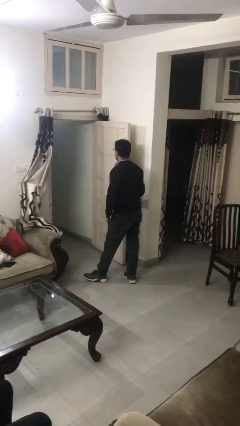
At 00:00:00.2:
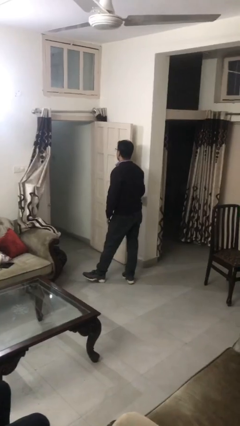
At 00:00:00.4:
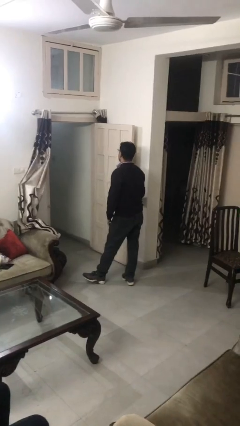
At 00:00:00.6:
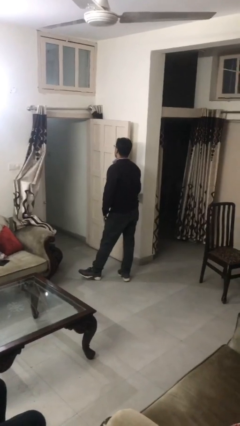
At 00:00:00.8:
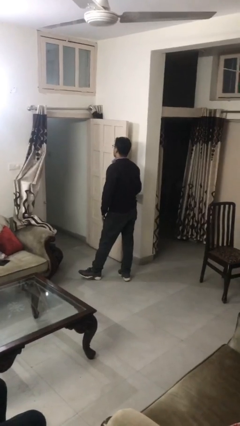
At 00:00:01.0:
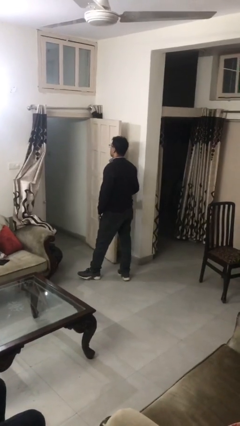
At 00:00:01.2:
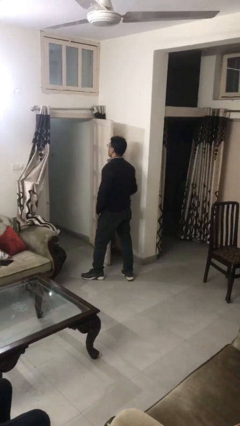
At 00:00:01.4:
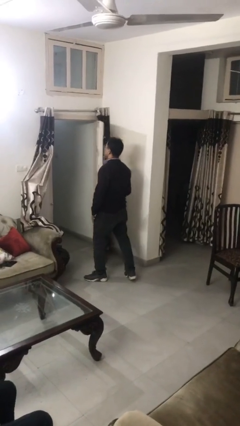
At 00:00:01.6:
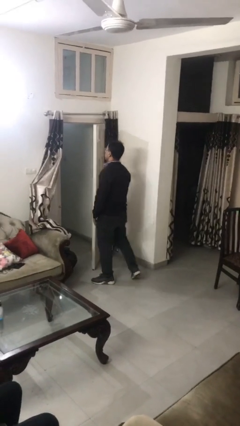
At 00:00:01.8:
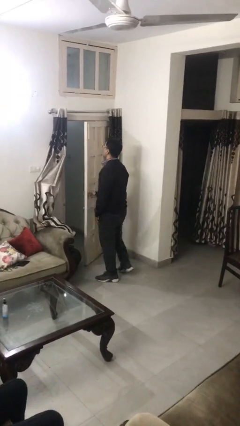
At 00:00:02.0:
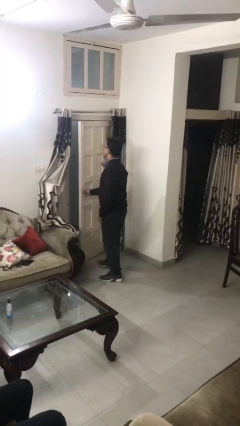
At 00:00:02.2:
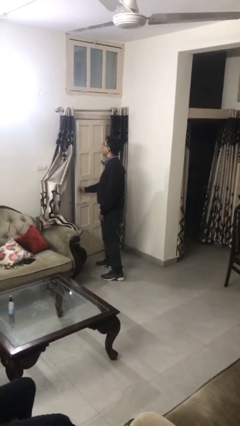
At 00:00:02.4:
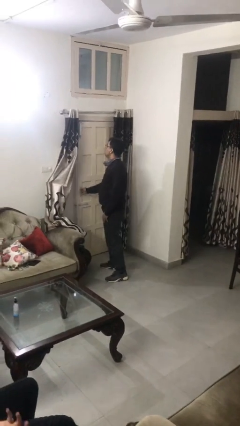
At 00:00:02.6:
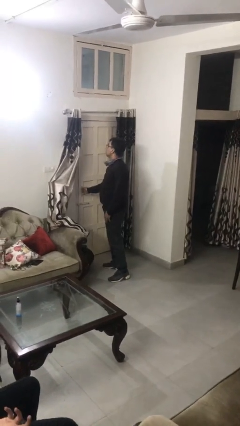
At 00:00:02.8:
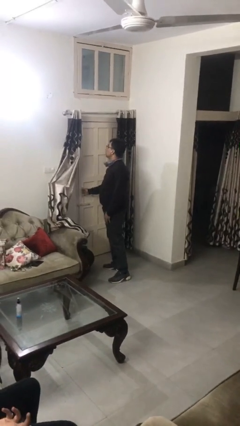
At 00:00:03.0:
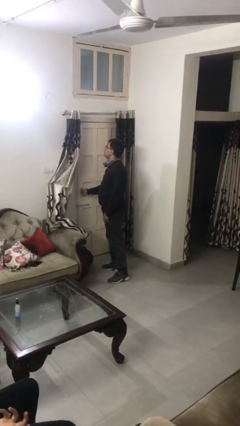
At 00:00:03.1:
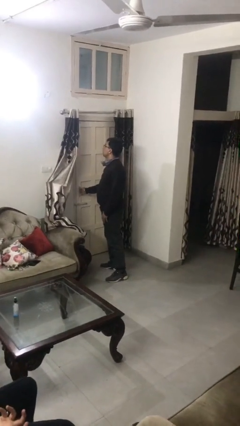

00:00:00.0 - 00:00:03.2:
person closes facility door

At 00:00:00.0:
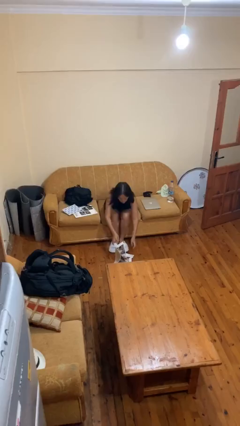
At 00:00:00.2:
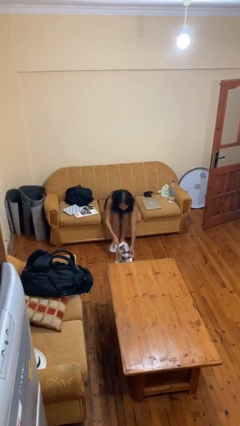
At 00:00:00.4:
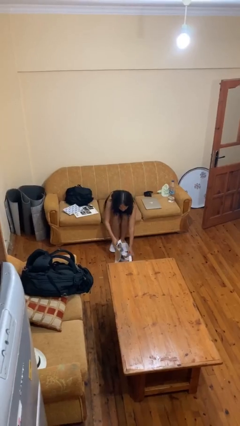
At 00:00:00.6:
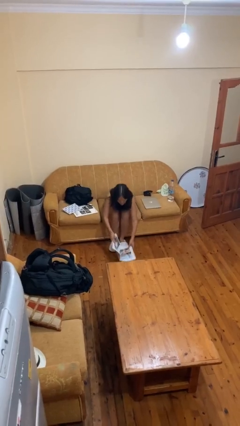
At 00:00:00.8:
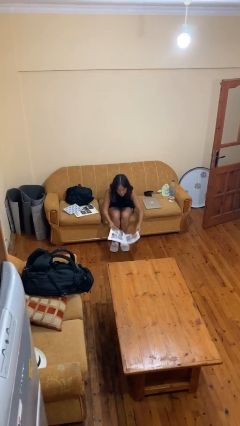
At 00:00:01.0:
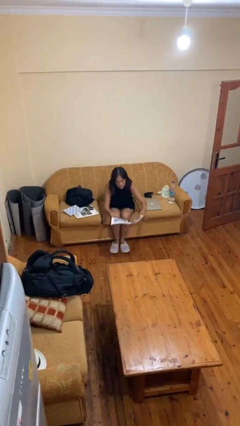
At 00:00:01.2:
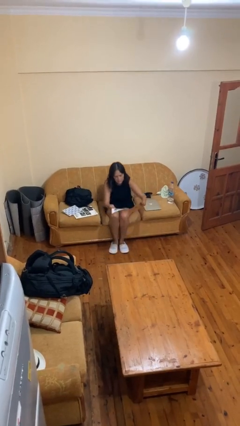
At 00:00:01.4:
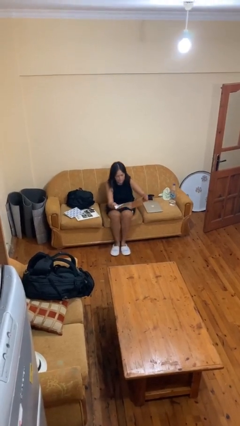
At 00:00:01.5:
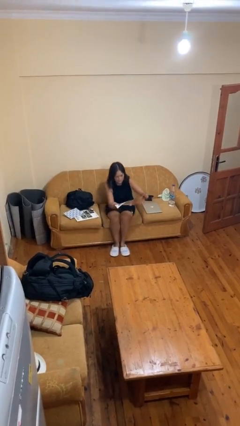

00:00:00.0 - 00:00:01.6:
person picks up object from floor

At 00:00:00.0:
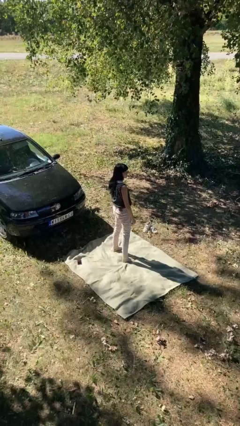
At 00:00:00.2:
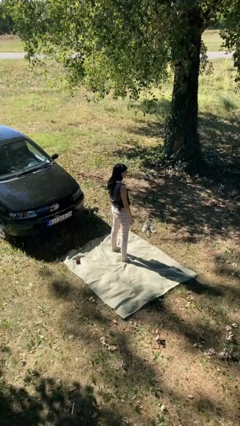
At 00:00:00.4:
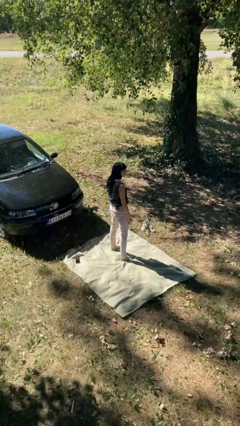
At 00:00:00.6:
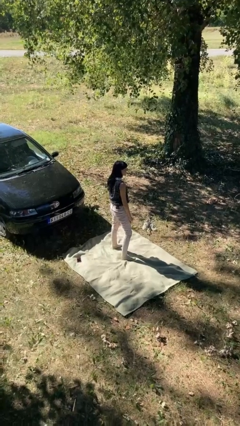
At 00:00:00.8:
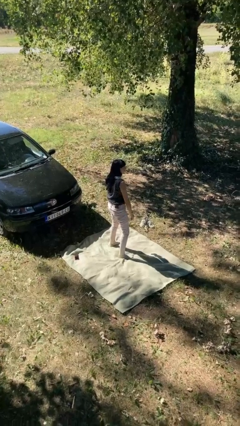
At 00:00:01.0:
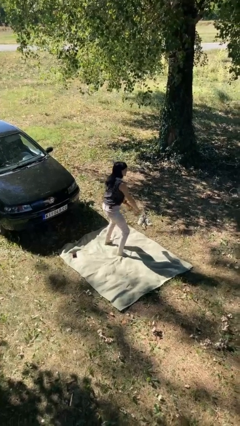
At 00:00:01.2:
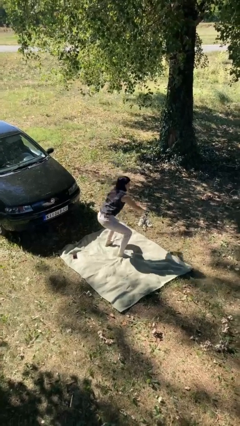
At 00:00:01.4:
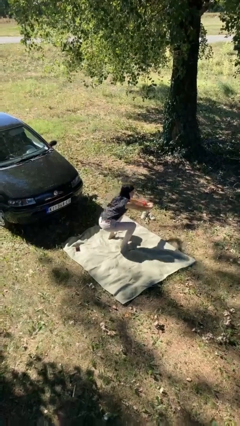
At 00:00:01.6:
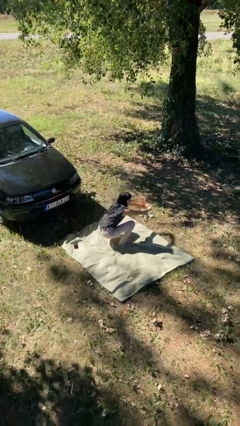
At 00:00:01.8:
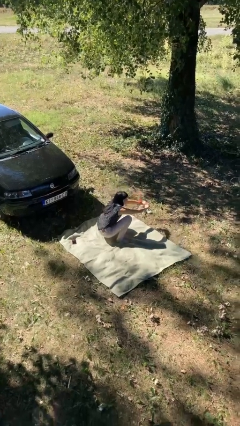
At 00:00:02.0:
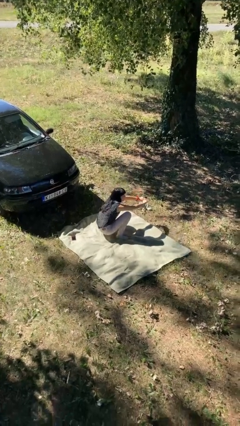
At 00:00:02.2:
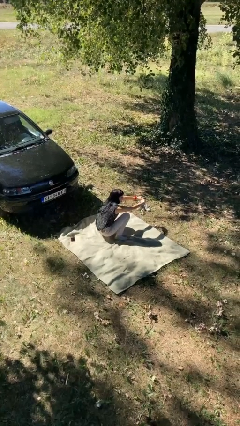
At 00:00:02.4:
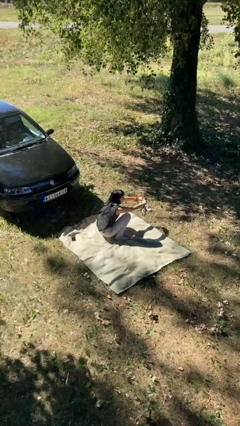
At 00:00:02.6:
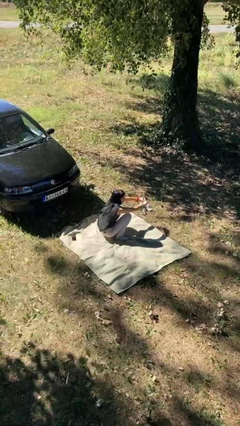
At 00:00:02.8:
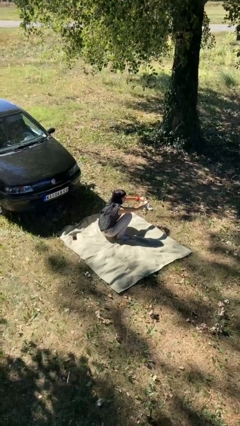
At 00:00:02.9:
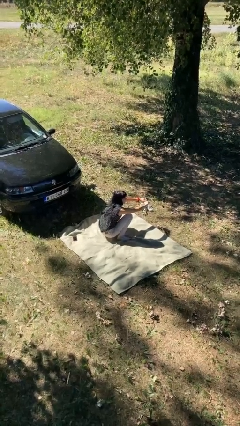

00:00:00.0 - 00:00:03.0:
person squats

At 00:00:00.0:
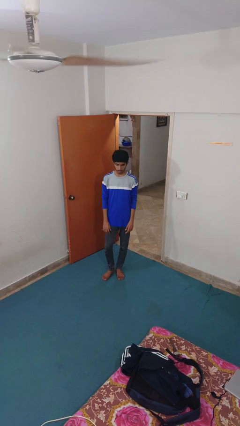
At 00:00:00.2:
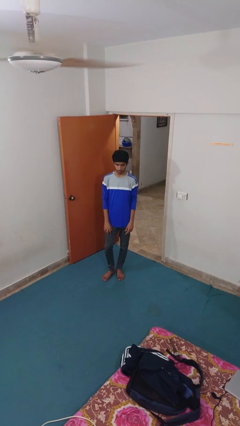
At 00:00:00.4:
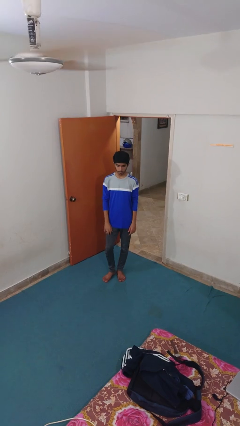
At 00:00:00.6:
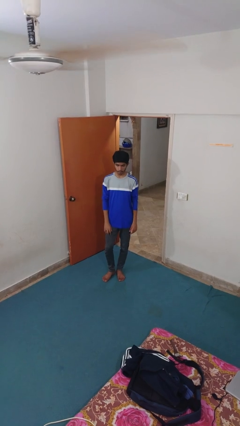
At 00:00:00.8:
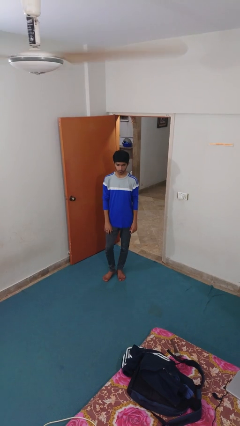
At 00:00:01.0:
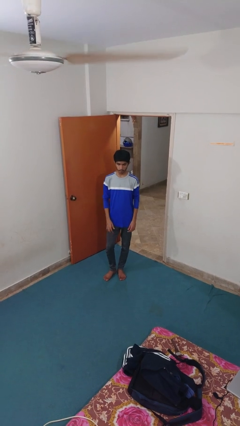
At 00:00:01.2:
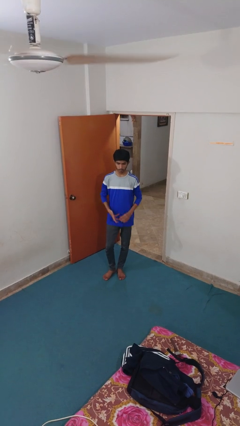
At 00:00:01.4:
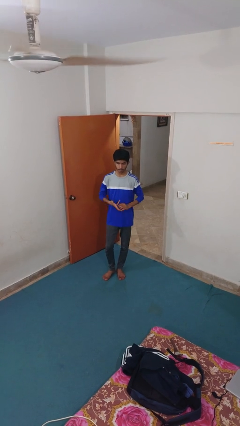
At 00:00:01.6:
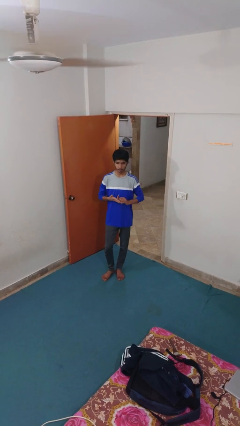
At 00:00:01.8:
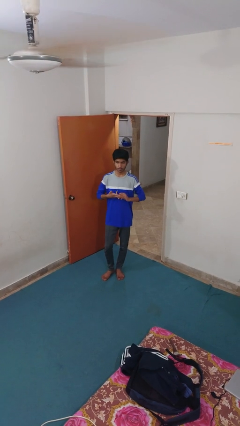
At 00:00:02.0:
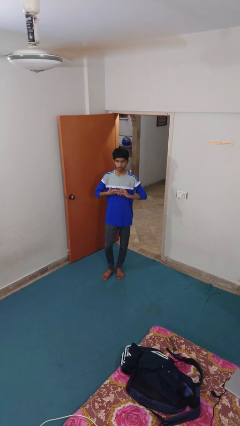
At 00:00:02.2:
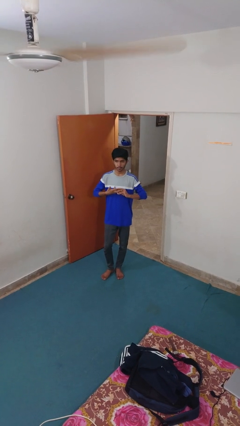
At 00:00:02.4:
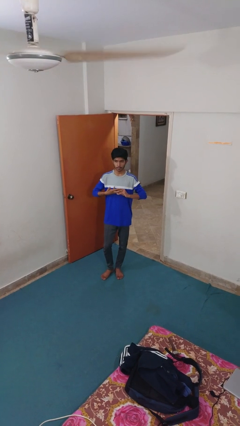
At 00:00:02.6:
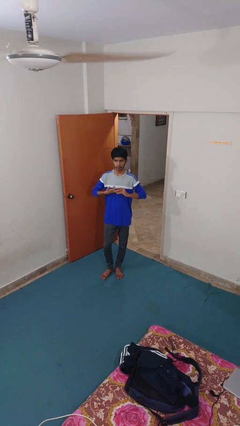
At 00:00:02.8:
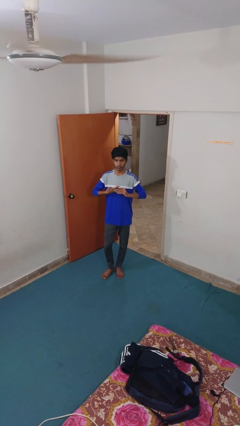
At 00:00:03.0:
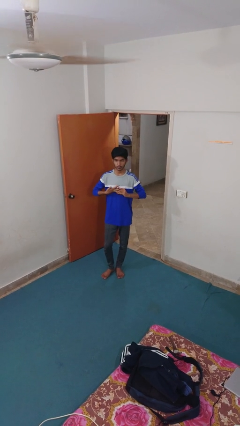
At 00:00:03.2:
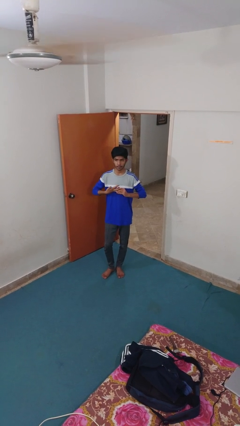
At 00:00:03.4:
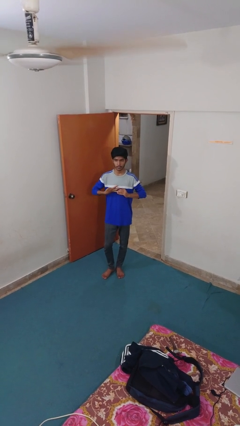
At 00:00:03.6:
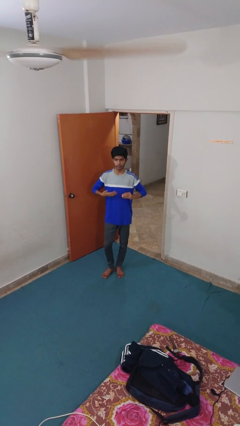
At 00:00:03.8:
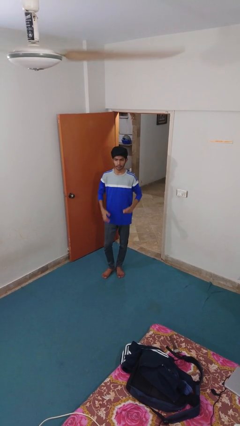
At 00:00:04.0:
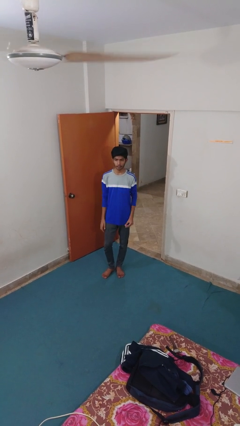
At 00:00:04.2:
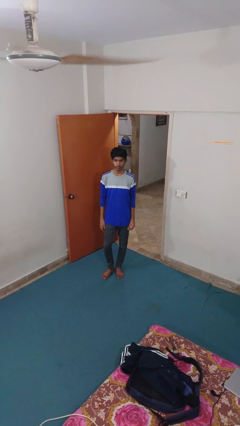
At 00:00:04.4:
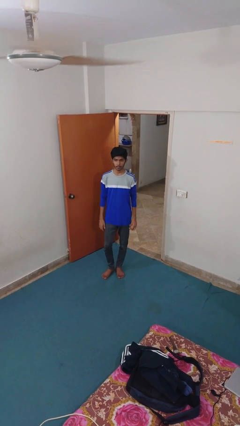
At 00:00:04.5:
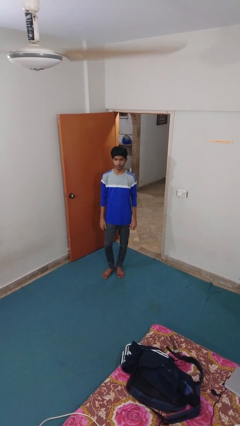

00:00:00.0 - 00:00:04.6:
person takes off ring

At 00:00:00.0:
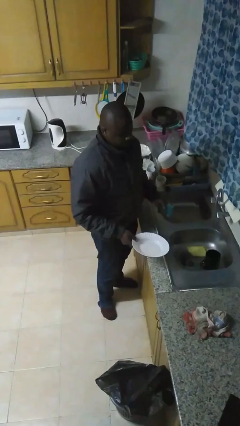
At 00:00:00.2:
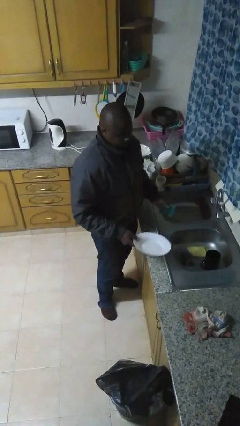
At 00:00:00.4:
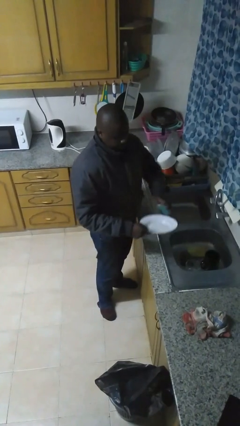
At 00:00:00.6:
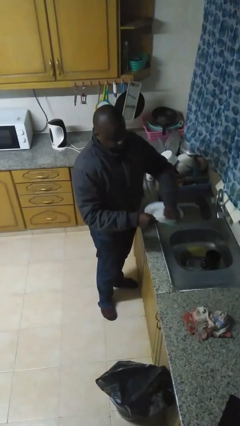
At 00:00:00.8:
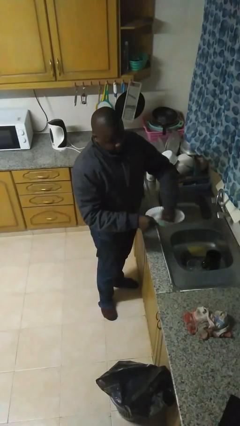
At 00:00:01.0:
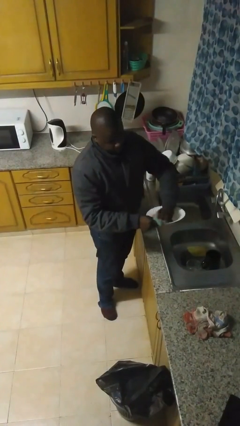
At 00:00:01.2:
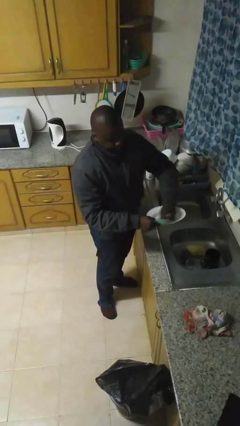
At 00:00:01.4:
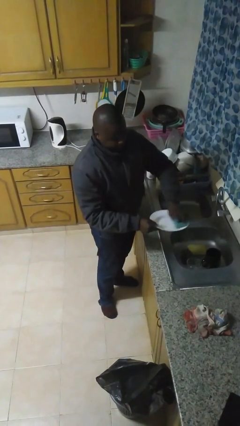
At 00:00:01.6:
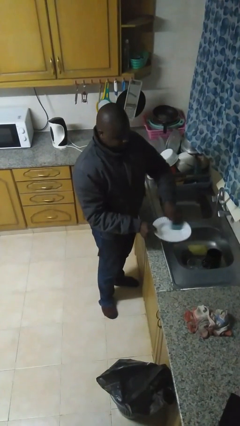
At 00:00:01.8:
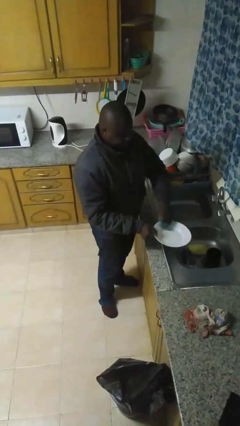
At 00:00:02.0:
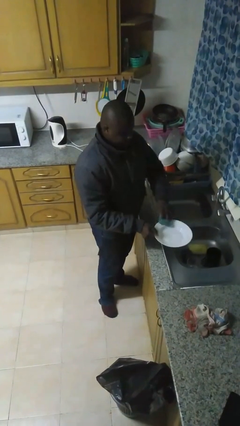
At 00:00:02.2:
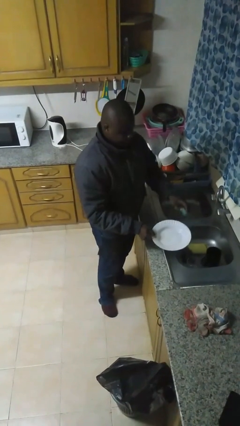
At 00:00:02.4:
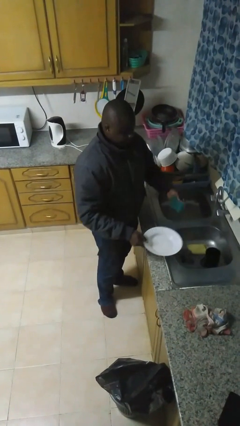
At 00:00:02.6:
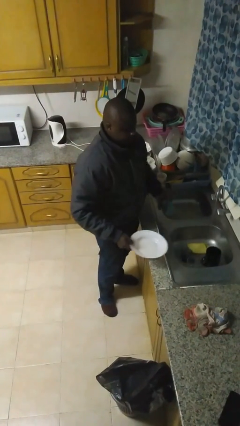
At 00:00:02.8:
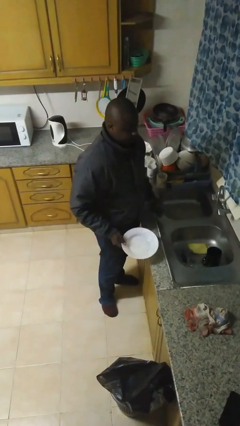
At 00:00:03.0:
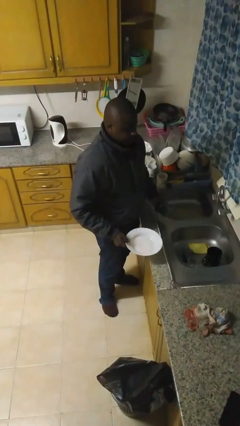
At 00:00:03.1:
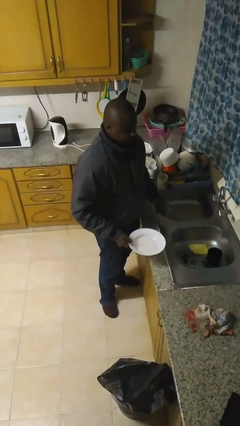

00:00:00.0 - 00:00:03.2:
person washes dish

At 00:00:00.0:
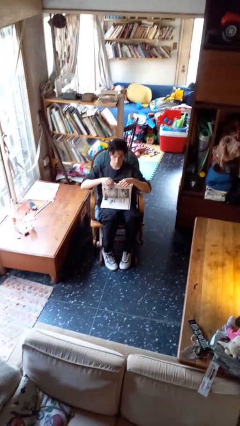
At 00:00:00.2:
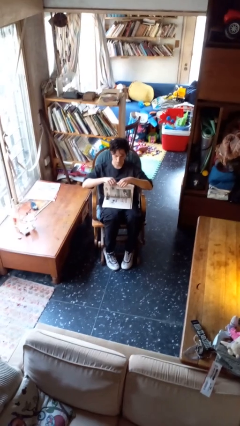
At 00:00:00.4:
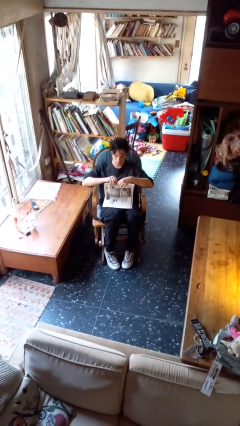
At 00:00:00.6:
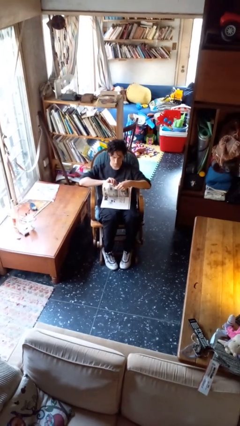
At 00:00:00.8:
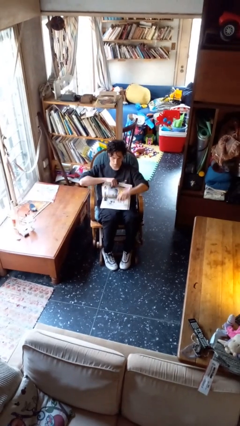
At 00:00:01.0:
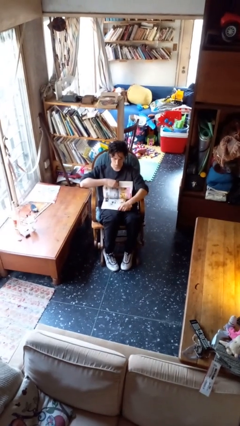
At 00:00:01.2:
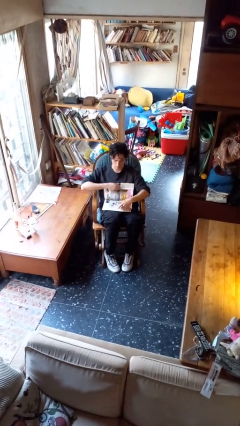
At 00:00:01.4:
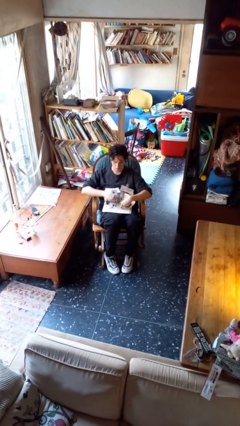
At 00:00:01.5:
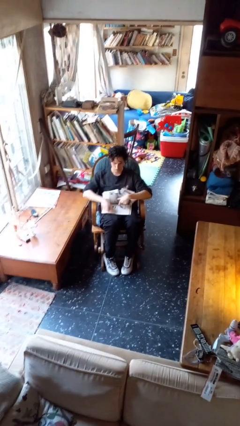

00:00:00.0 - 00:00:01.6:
person tears paper
